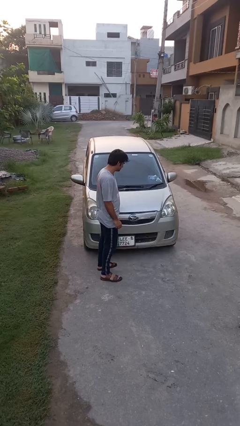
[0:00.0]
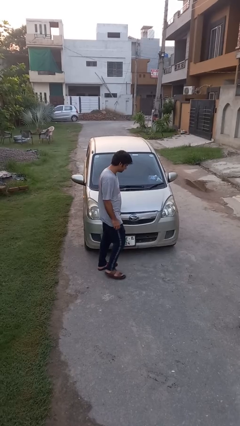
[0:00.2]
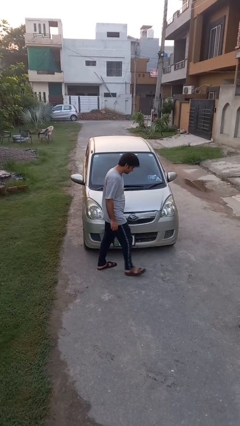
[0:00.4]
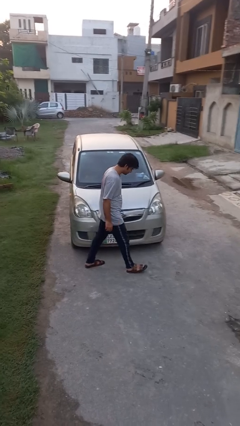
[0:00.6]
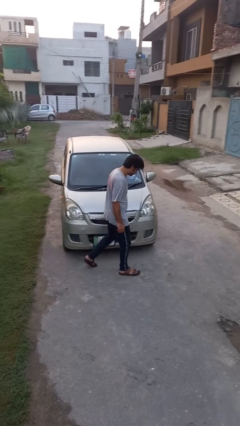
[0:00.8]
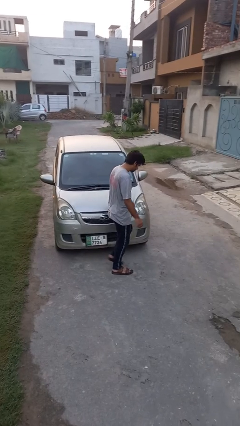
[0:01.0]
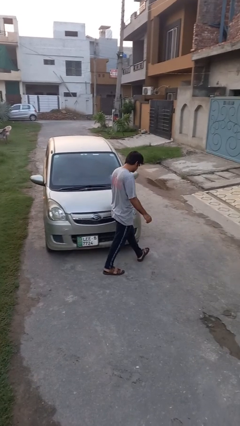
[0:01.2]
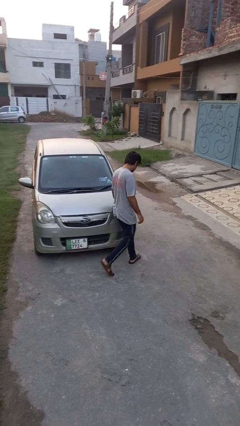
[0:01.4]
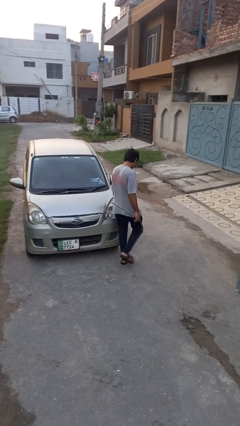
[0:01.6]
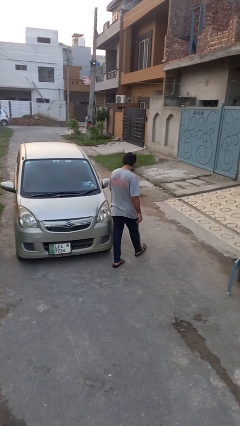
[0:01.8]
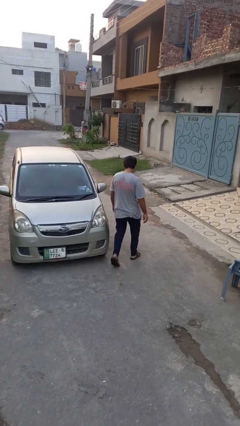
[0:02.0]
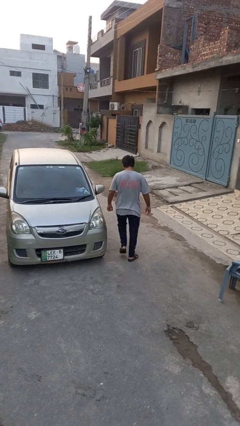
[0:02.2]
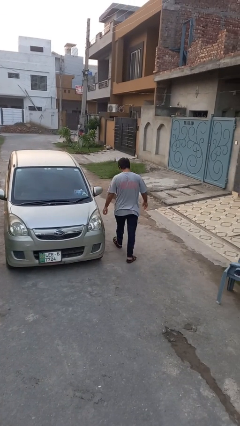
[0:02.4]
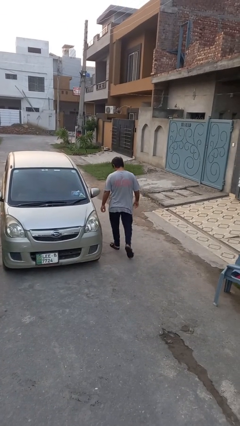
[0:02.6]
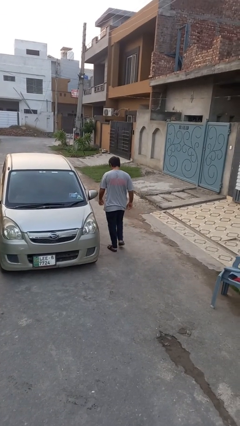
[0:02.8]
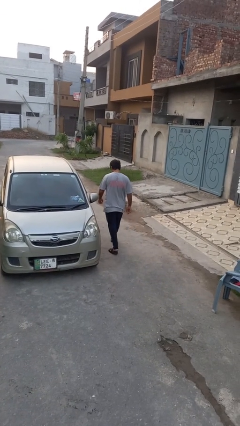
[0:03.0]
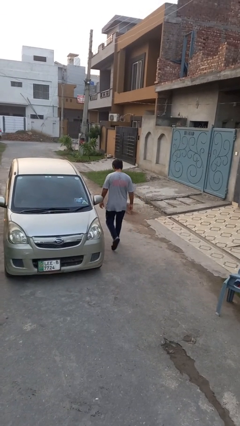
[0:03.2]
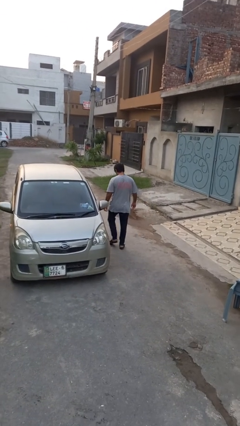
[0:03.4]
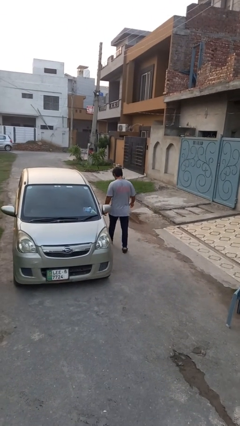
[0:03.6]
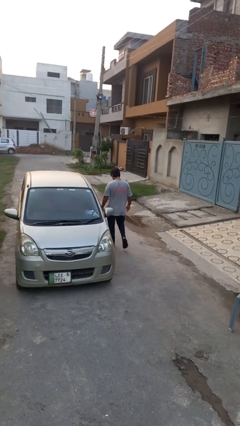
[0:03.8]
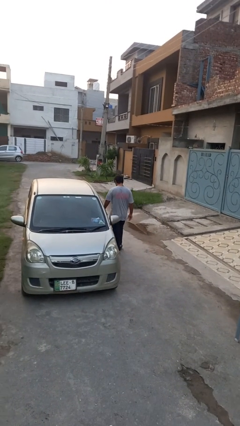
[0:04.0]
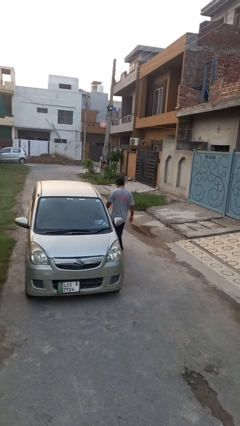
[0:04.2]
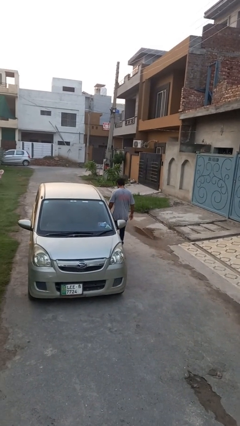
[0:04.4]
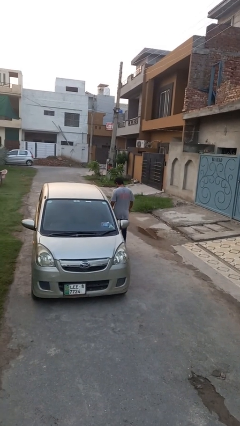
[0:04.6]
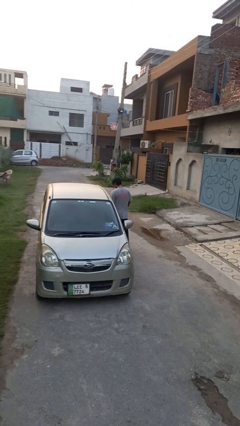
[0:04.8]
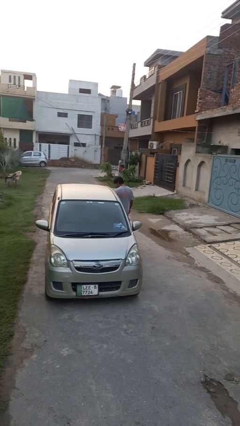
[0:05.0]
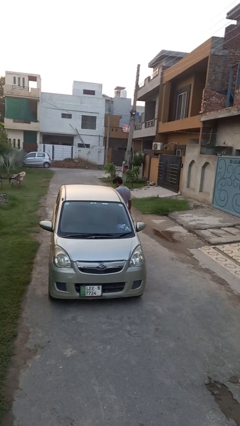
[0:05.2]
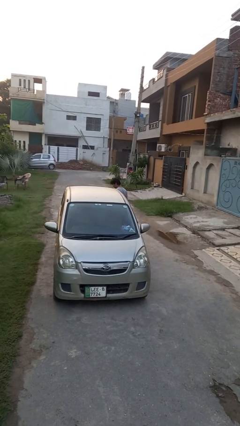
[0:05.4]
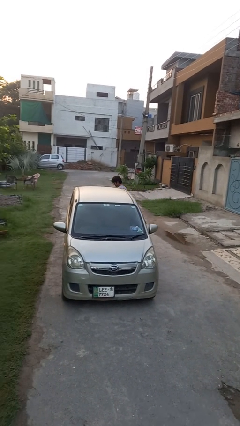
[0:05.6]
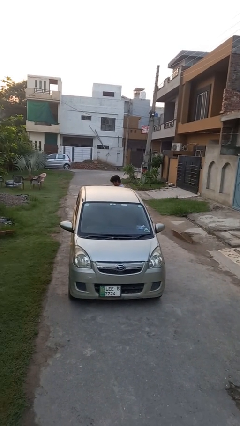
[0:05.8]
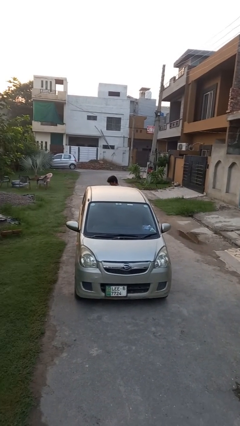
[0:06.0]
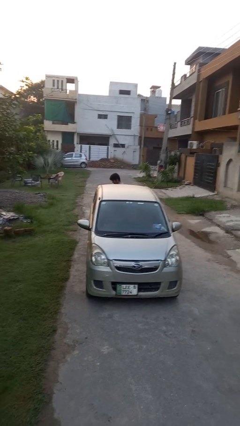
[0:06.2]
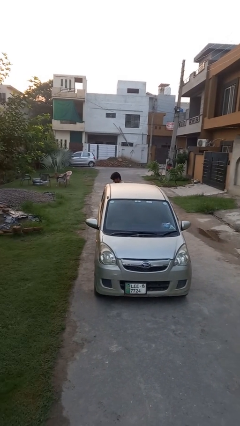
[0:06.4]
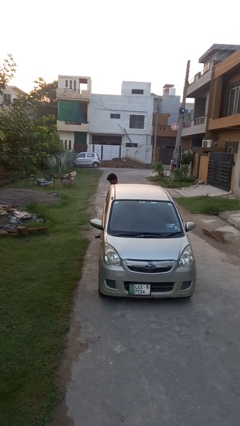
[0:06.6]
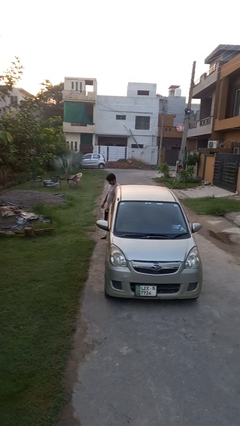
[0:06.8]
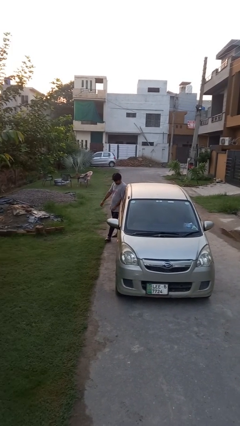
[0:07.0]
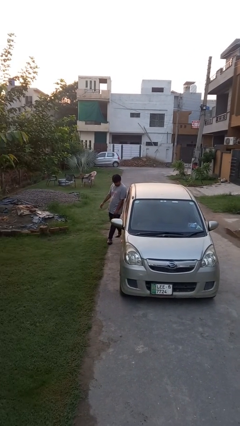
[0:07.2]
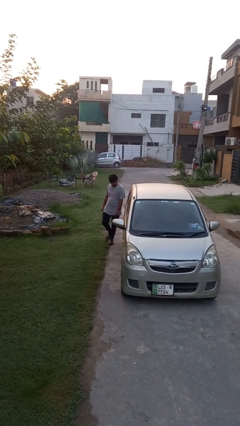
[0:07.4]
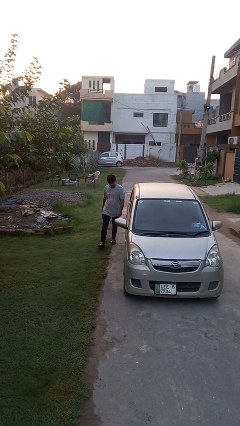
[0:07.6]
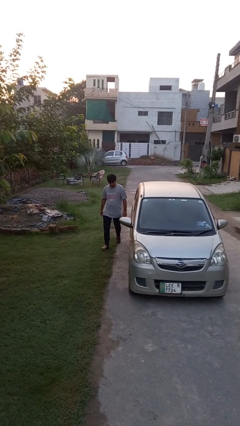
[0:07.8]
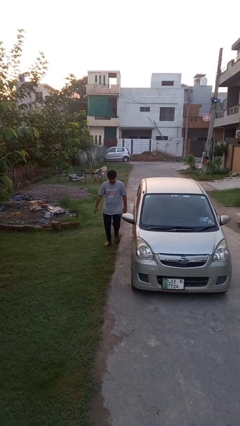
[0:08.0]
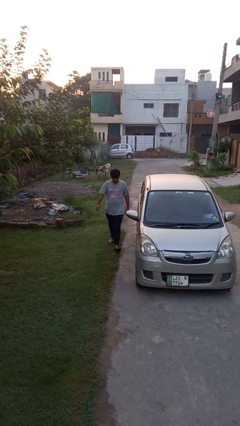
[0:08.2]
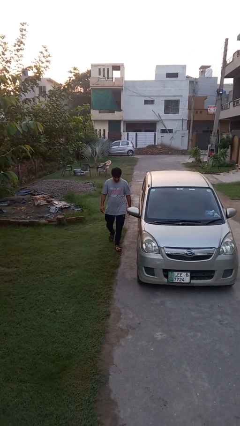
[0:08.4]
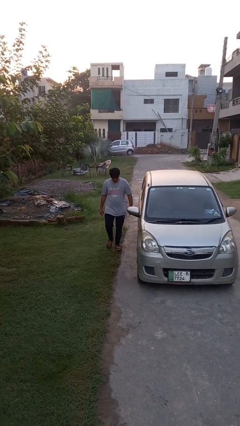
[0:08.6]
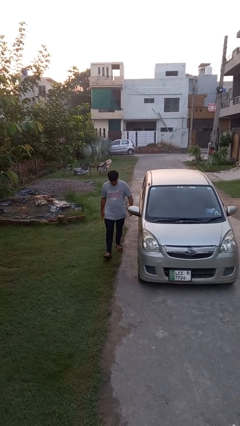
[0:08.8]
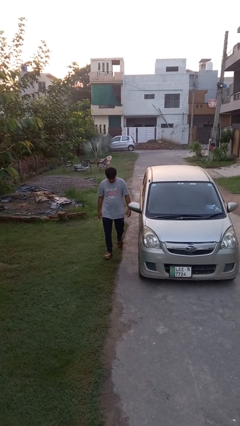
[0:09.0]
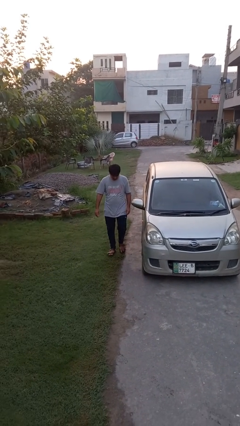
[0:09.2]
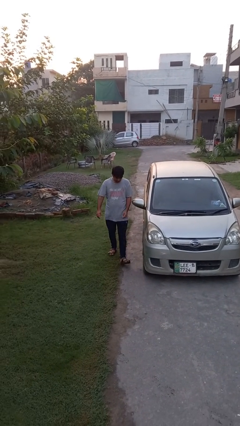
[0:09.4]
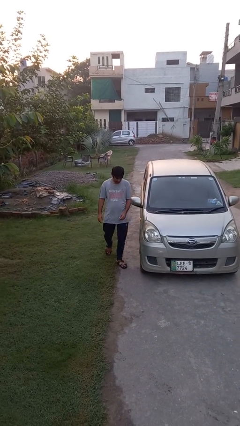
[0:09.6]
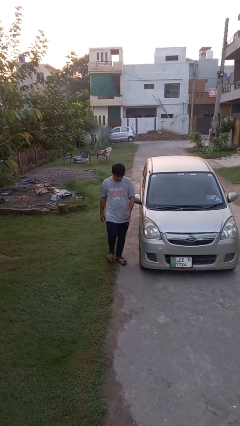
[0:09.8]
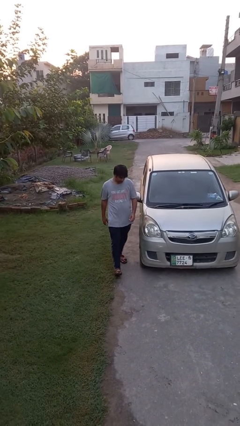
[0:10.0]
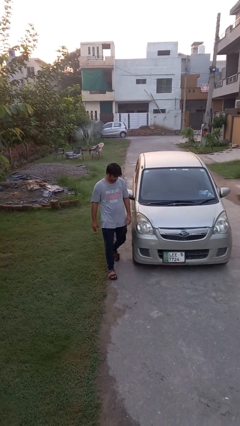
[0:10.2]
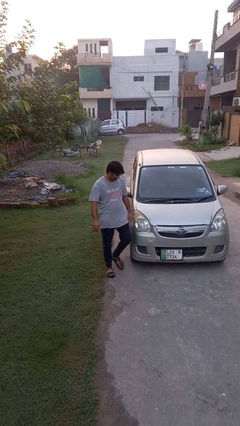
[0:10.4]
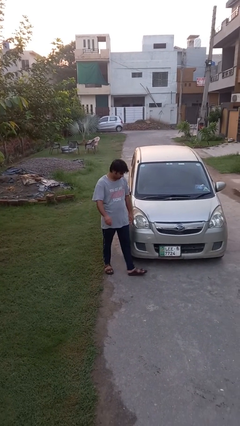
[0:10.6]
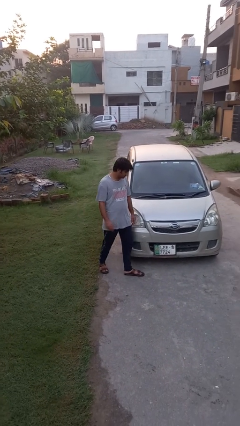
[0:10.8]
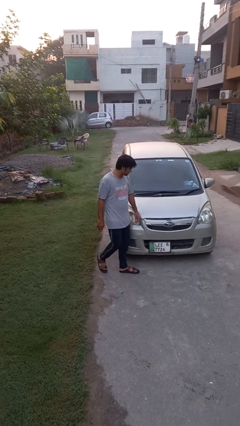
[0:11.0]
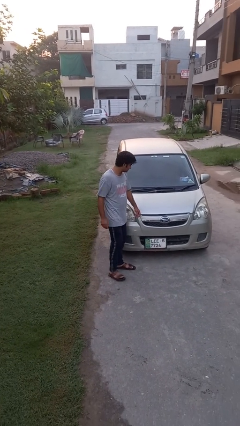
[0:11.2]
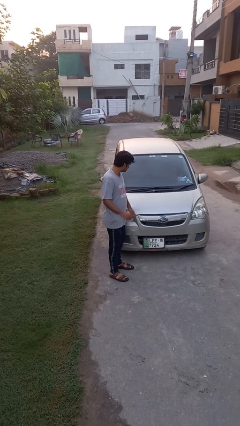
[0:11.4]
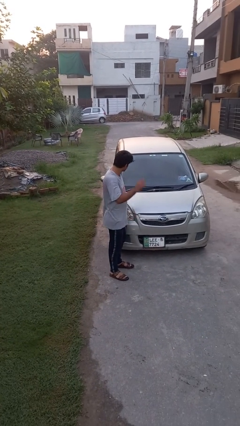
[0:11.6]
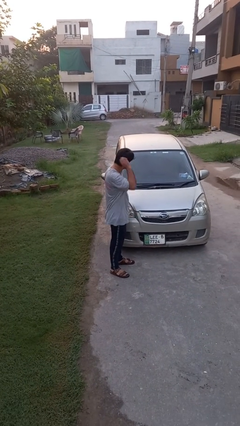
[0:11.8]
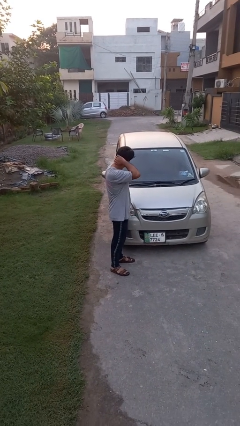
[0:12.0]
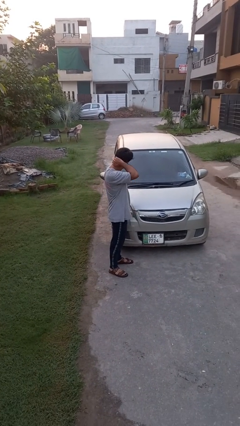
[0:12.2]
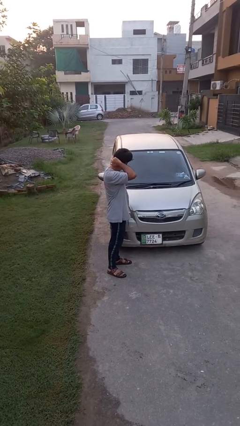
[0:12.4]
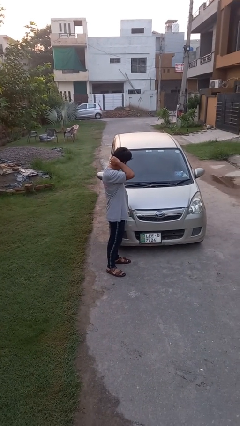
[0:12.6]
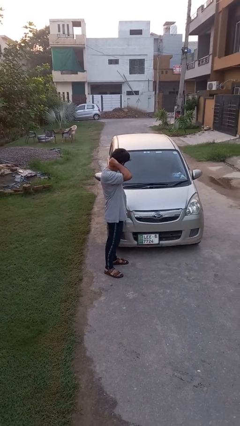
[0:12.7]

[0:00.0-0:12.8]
person walks around car

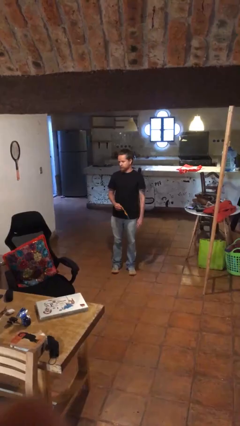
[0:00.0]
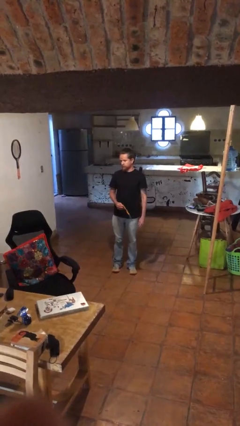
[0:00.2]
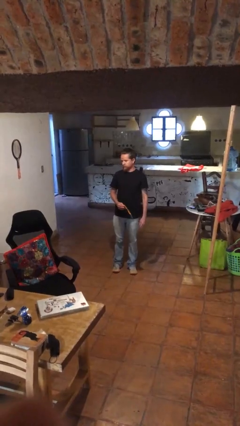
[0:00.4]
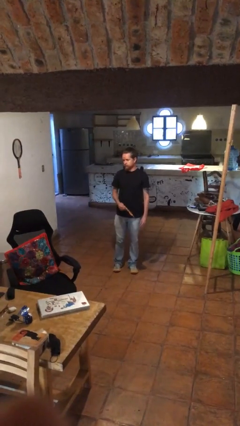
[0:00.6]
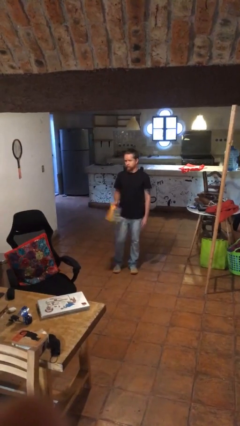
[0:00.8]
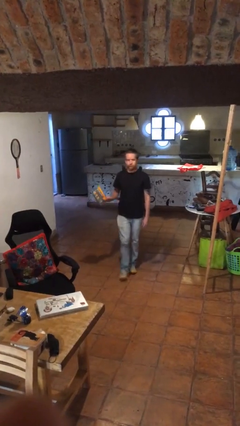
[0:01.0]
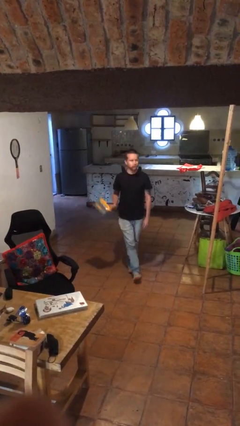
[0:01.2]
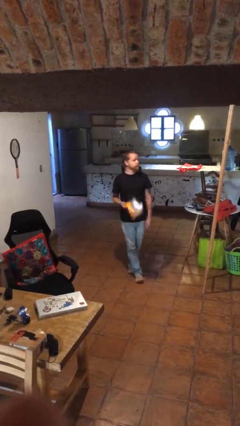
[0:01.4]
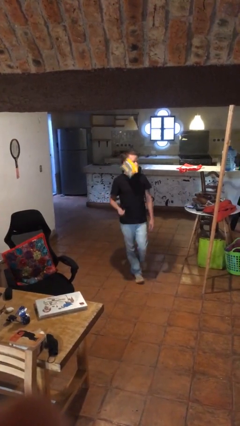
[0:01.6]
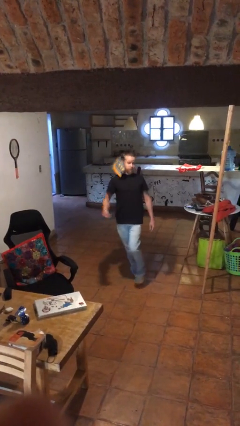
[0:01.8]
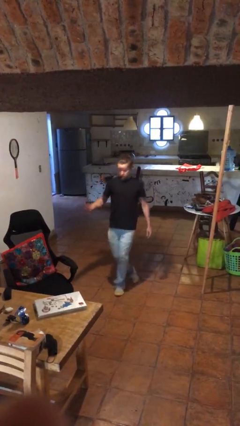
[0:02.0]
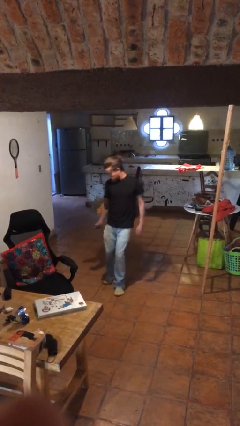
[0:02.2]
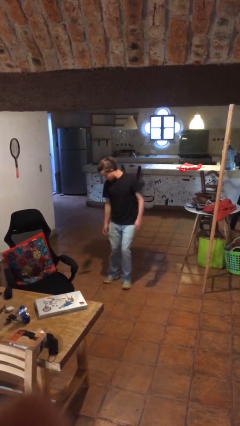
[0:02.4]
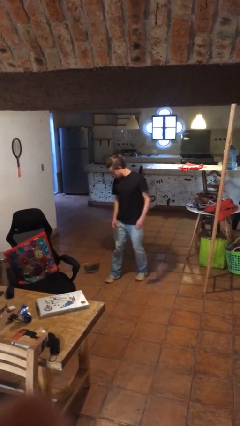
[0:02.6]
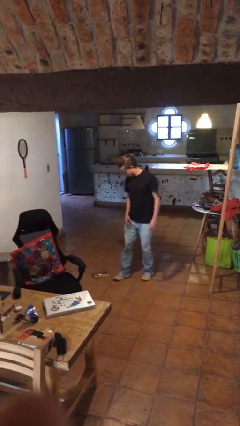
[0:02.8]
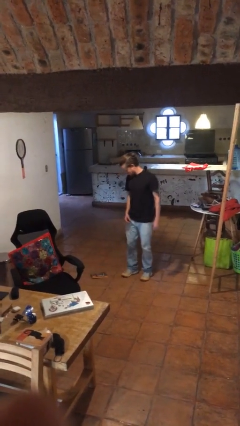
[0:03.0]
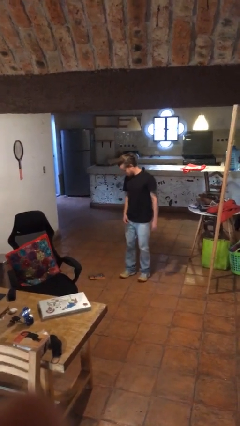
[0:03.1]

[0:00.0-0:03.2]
person drops object

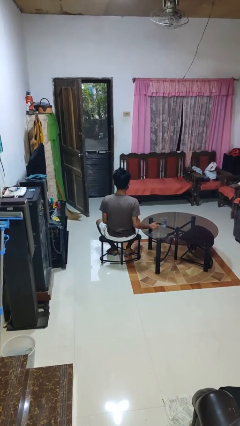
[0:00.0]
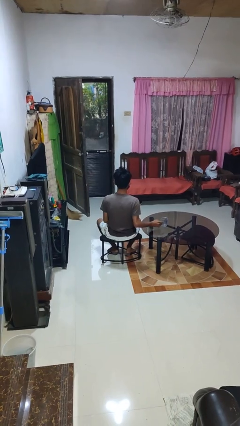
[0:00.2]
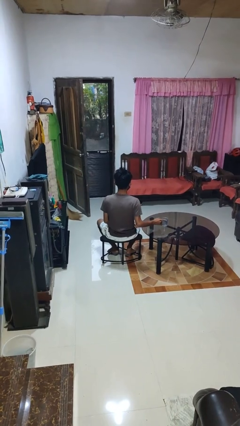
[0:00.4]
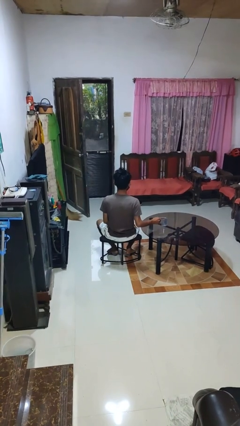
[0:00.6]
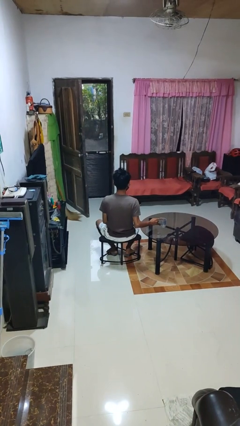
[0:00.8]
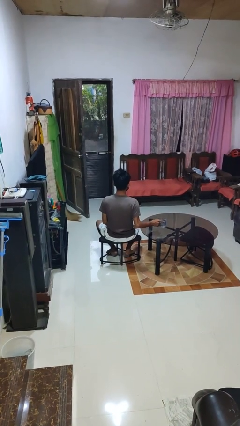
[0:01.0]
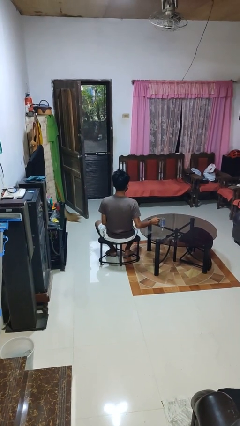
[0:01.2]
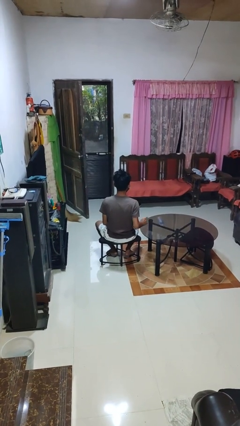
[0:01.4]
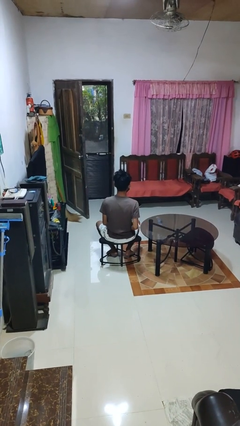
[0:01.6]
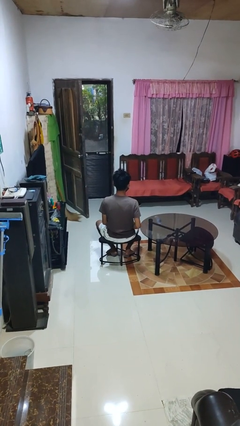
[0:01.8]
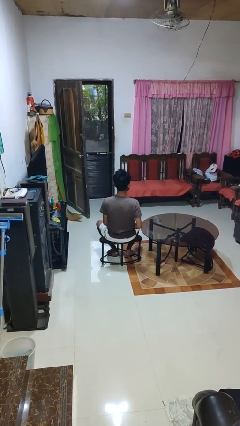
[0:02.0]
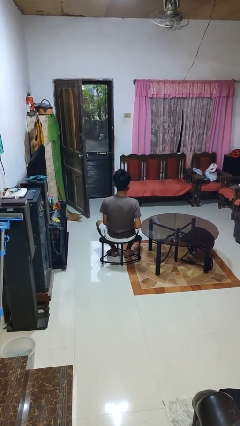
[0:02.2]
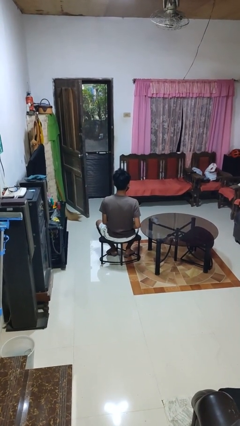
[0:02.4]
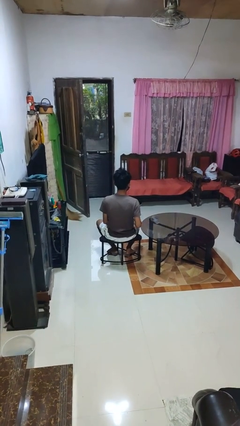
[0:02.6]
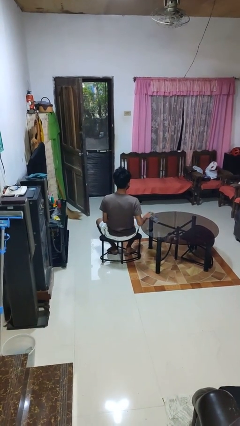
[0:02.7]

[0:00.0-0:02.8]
person knocks over glass
